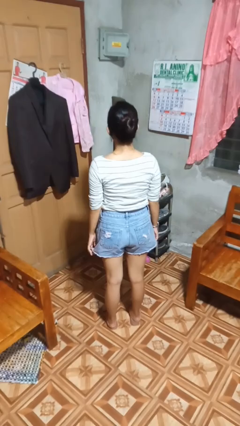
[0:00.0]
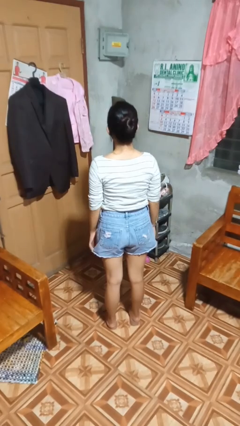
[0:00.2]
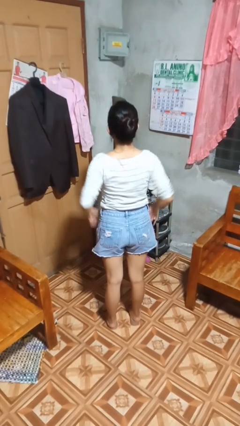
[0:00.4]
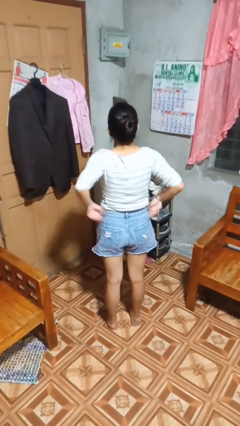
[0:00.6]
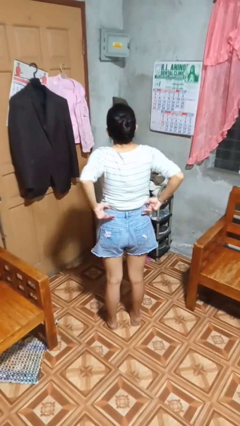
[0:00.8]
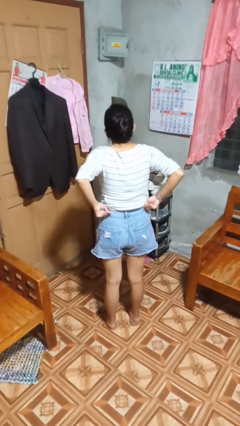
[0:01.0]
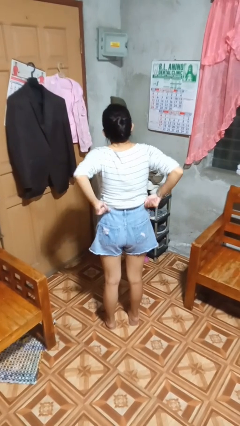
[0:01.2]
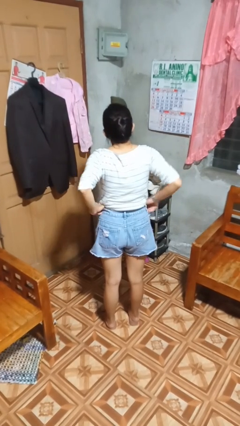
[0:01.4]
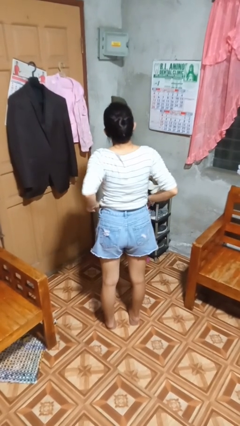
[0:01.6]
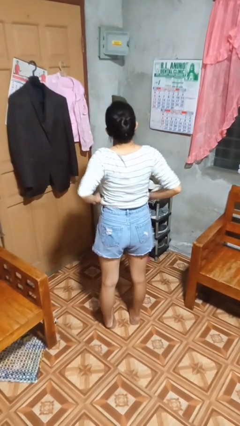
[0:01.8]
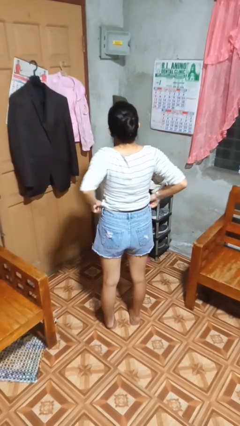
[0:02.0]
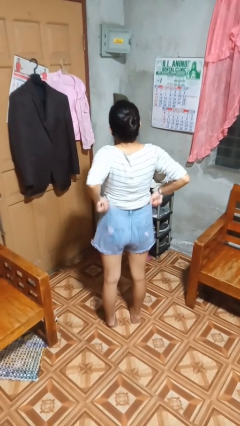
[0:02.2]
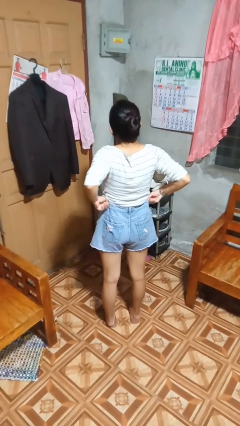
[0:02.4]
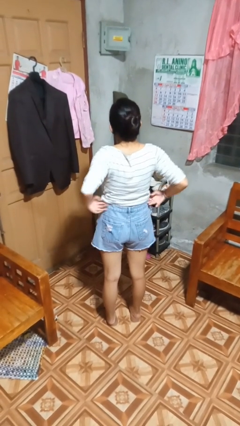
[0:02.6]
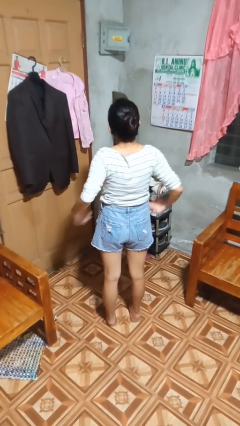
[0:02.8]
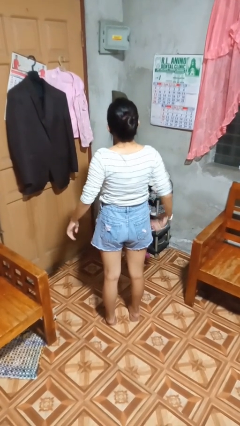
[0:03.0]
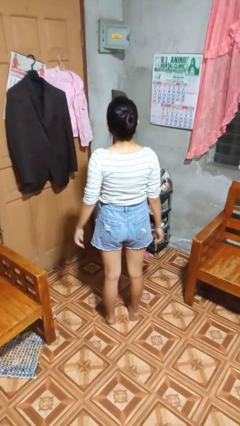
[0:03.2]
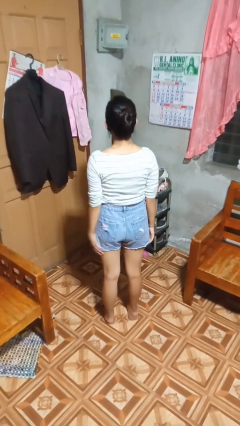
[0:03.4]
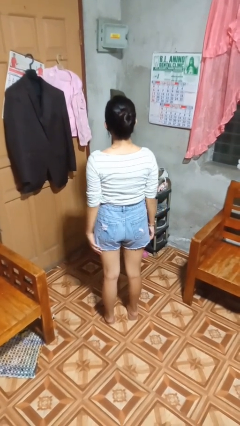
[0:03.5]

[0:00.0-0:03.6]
person hikes up pants

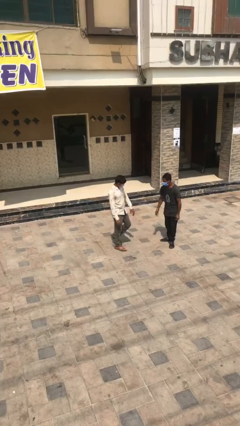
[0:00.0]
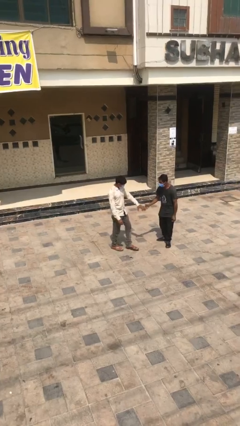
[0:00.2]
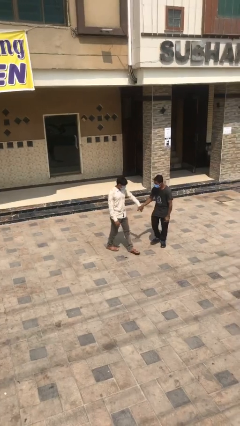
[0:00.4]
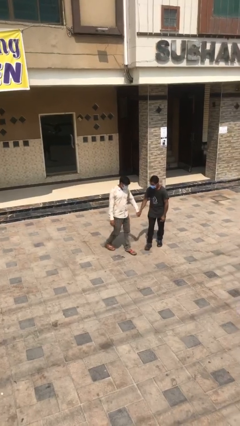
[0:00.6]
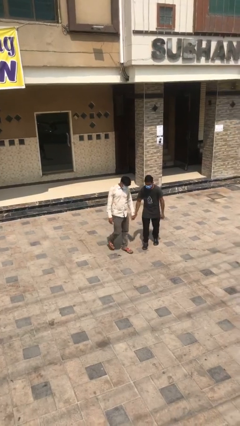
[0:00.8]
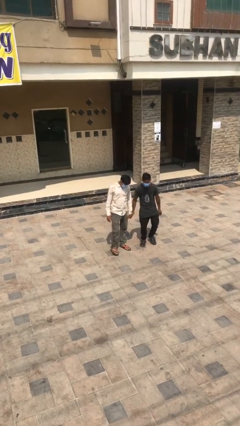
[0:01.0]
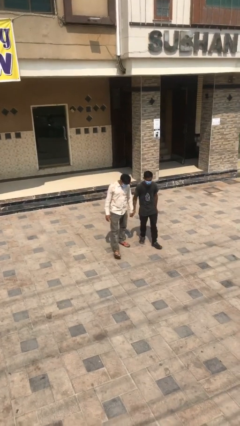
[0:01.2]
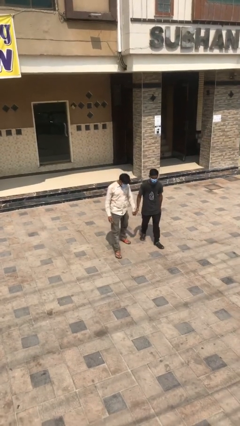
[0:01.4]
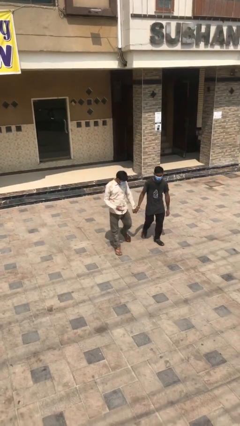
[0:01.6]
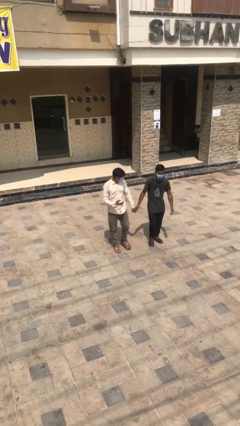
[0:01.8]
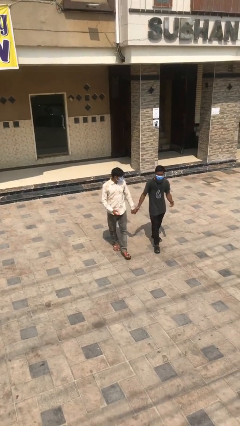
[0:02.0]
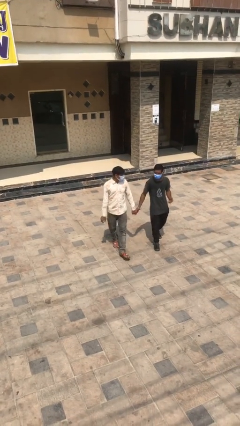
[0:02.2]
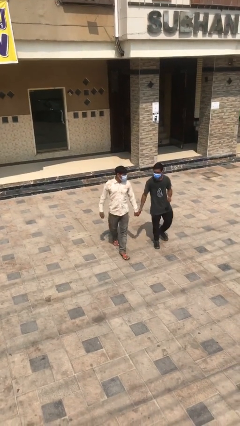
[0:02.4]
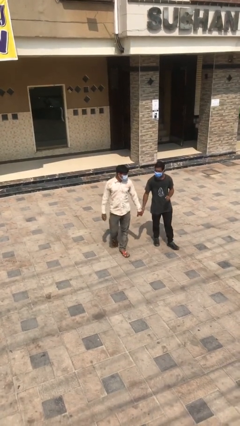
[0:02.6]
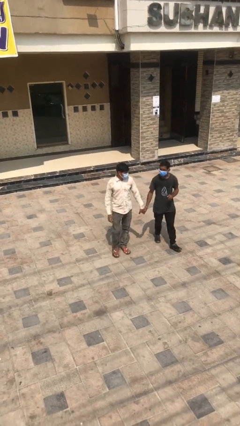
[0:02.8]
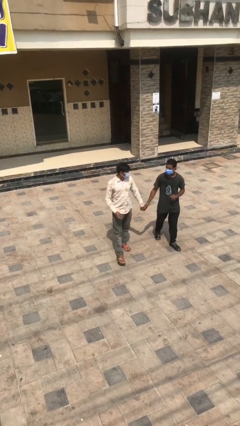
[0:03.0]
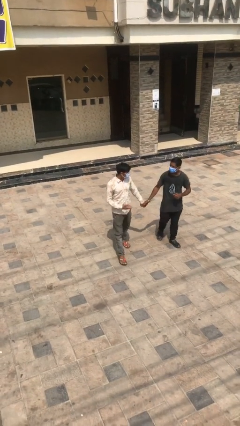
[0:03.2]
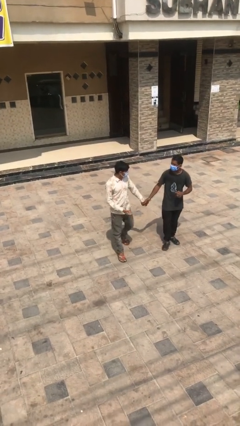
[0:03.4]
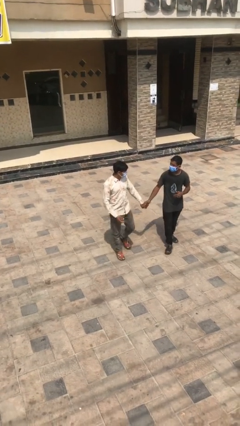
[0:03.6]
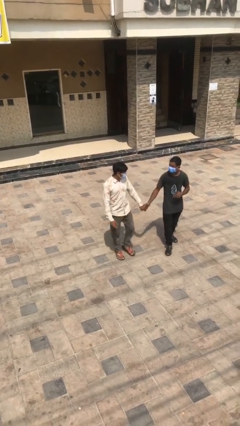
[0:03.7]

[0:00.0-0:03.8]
person holds hand

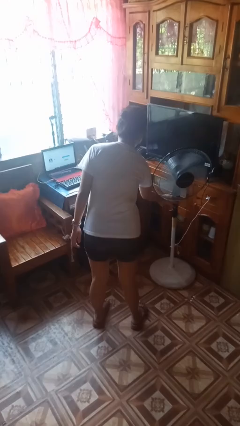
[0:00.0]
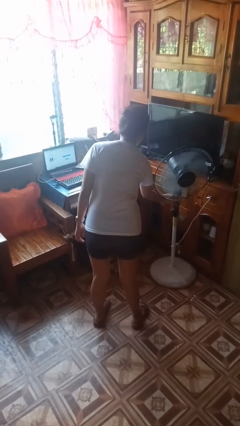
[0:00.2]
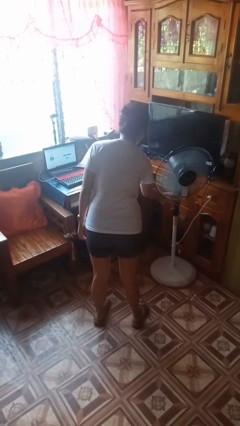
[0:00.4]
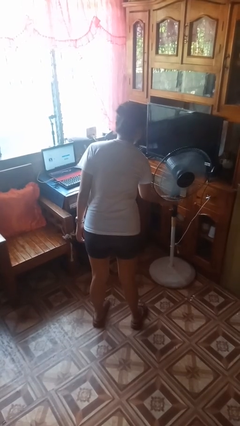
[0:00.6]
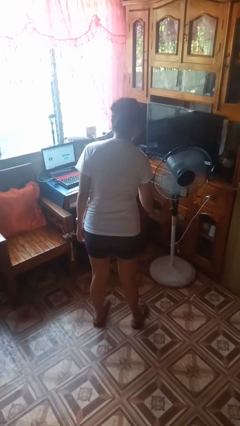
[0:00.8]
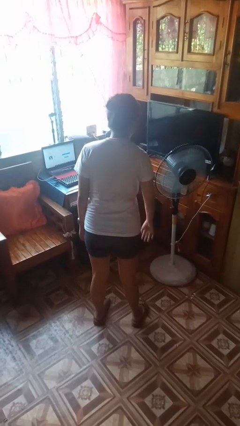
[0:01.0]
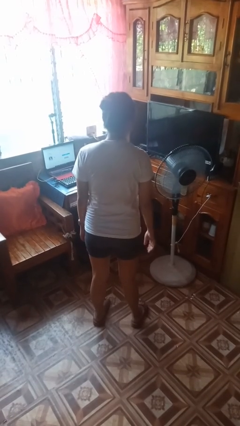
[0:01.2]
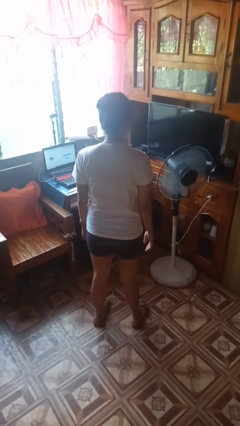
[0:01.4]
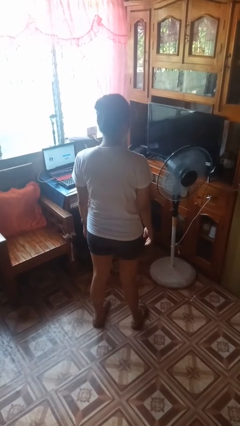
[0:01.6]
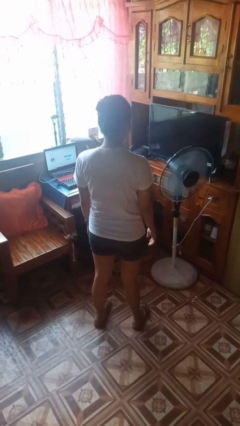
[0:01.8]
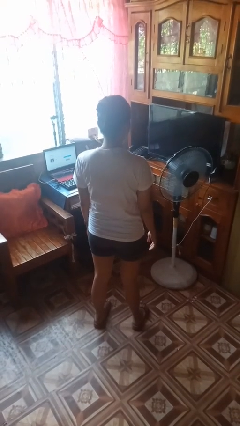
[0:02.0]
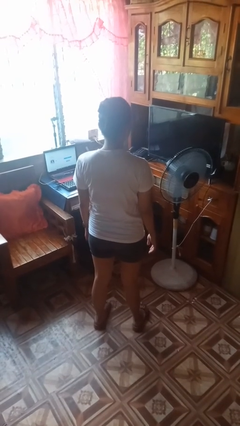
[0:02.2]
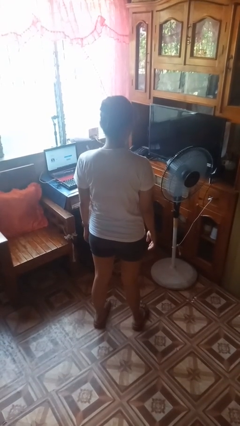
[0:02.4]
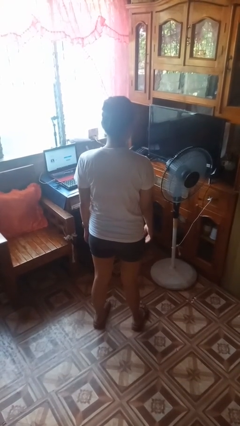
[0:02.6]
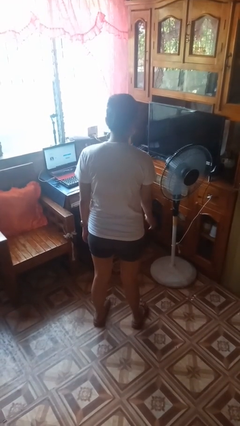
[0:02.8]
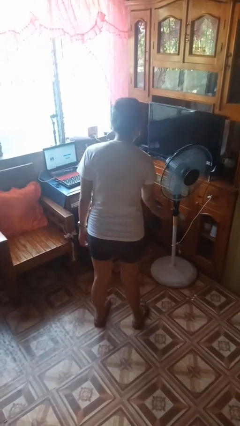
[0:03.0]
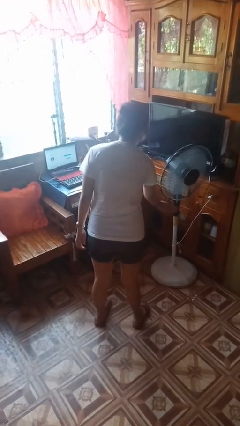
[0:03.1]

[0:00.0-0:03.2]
person turns on fan

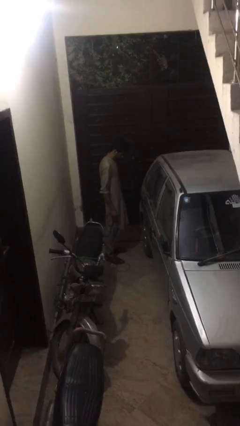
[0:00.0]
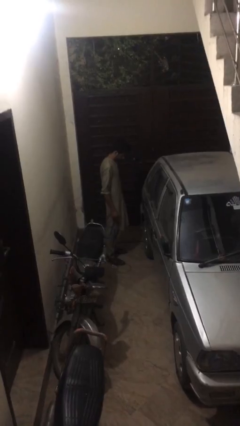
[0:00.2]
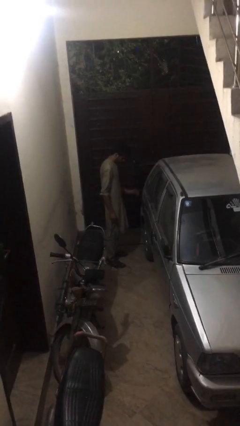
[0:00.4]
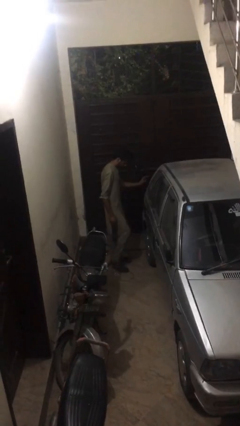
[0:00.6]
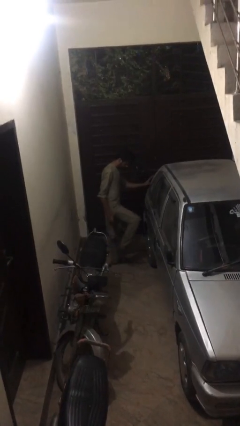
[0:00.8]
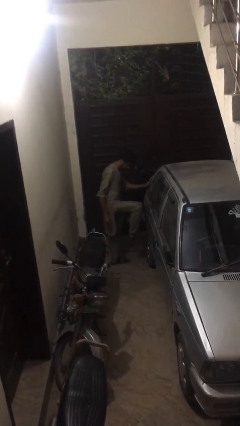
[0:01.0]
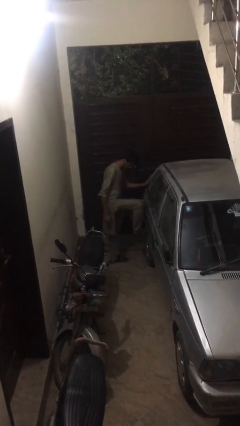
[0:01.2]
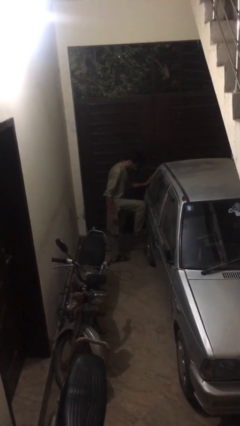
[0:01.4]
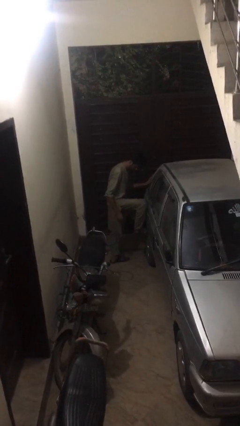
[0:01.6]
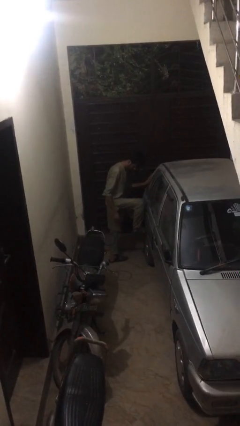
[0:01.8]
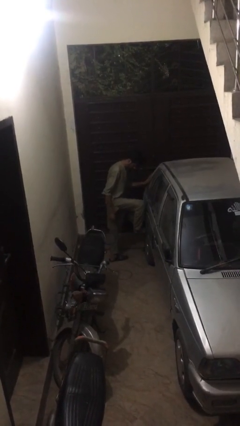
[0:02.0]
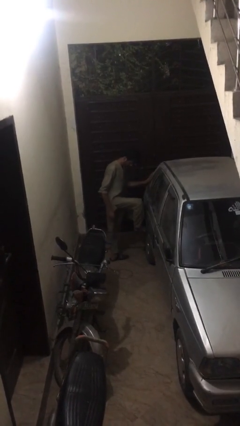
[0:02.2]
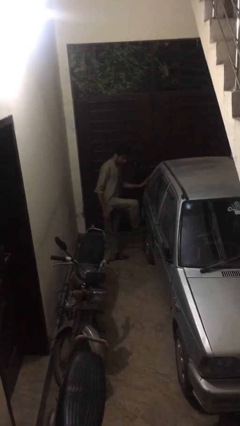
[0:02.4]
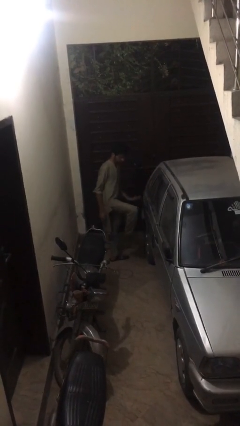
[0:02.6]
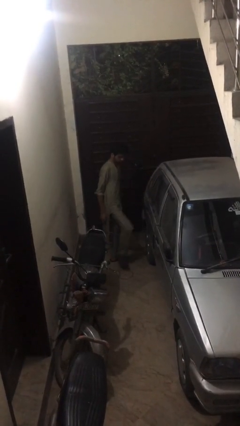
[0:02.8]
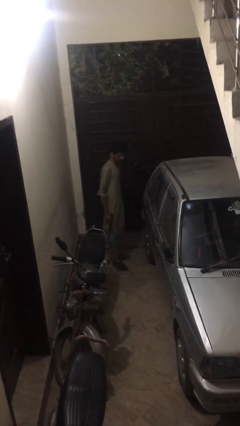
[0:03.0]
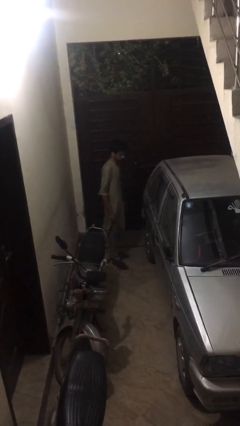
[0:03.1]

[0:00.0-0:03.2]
person kicks car tires

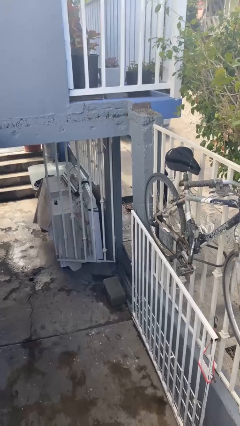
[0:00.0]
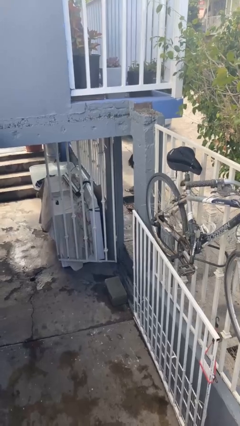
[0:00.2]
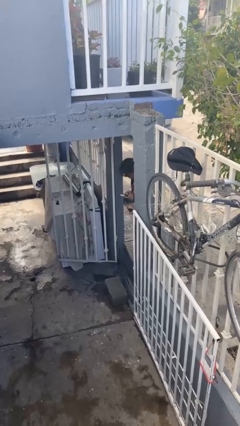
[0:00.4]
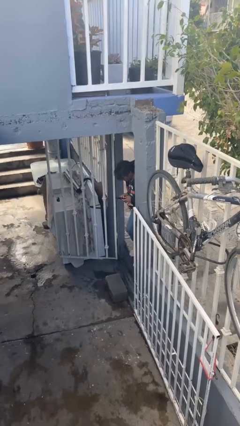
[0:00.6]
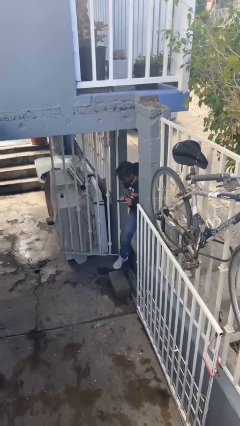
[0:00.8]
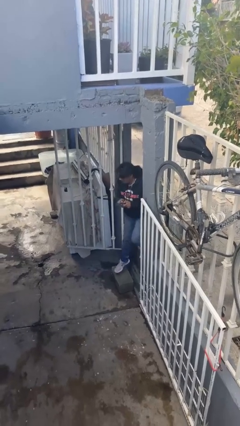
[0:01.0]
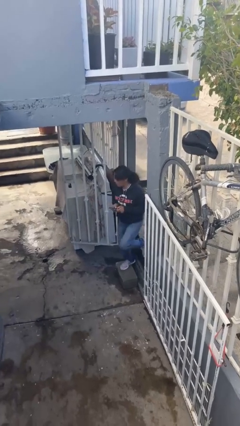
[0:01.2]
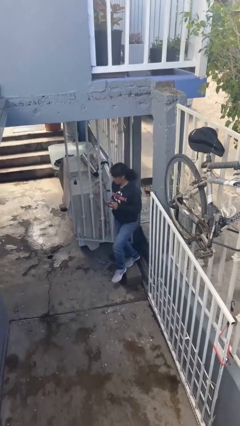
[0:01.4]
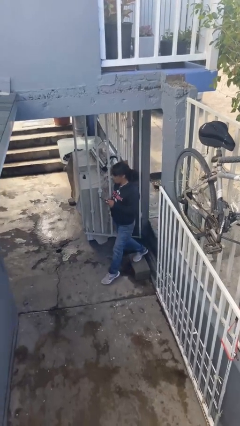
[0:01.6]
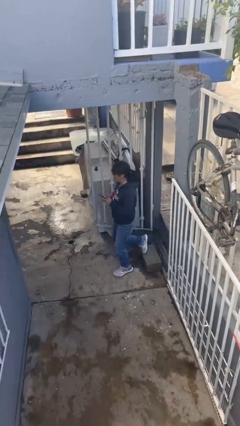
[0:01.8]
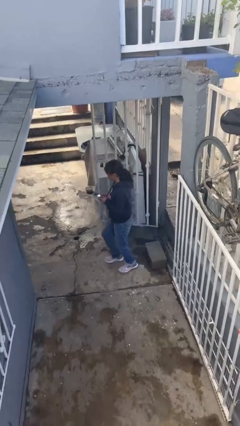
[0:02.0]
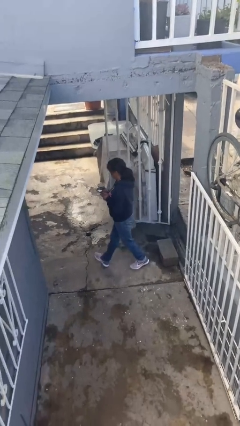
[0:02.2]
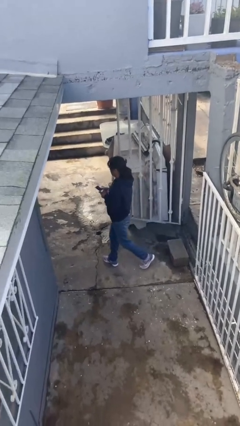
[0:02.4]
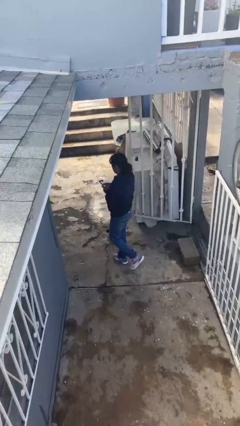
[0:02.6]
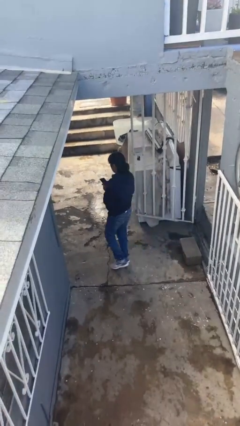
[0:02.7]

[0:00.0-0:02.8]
person enters scene through structure

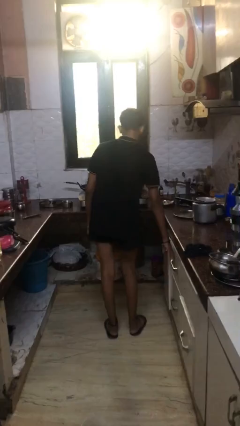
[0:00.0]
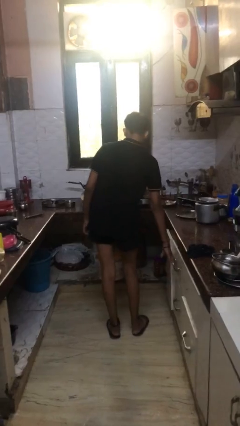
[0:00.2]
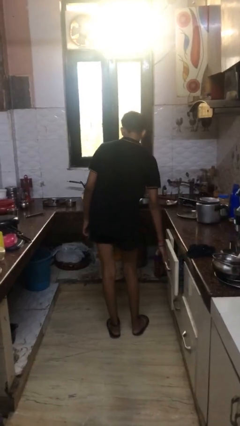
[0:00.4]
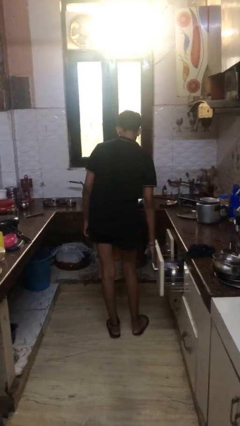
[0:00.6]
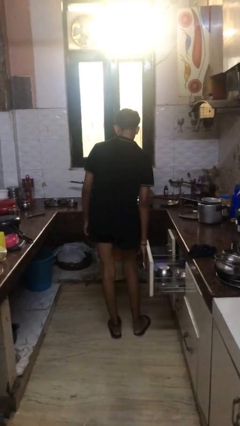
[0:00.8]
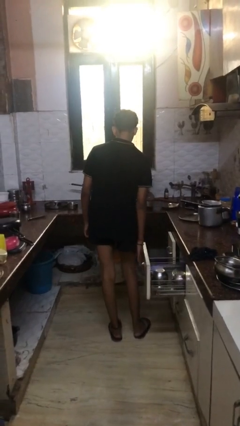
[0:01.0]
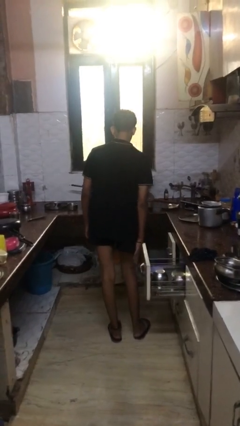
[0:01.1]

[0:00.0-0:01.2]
person opens kitchen drawer
